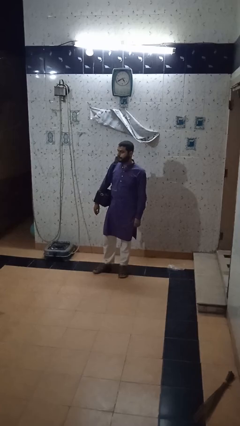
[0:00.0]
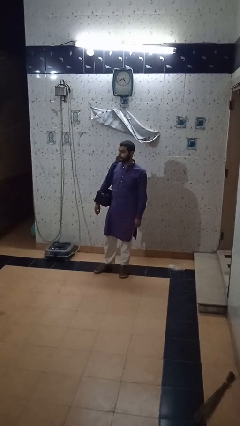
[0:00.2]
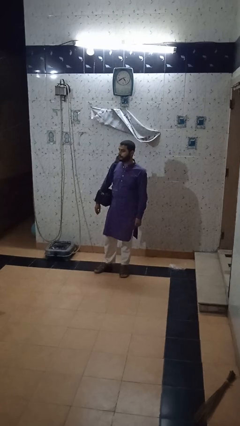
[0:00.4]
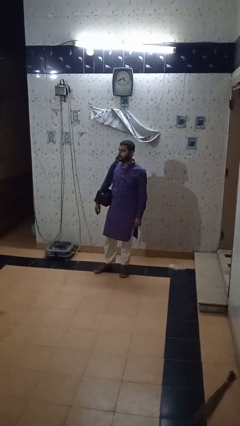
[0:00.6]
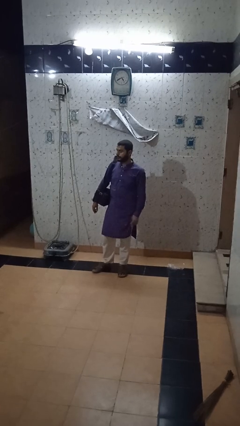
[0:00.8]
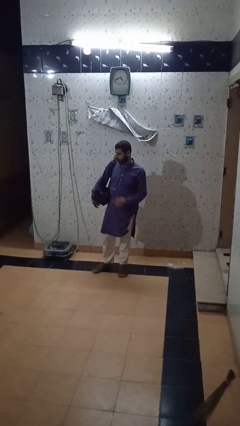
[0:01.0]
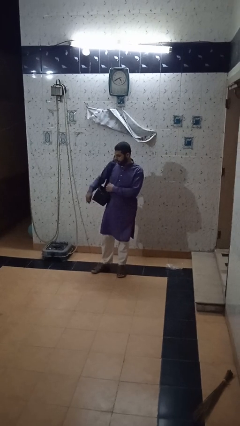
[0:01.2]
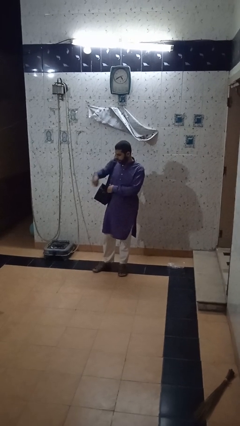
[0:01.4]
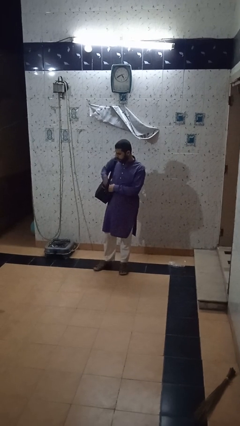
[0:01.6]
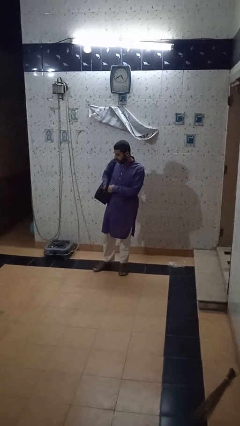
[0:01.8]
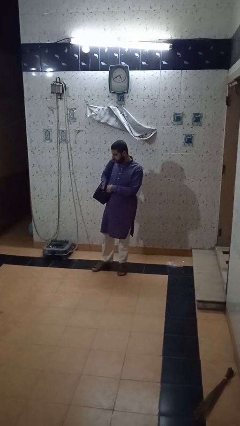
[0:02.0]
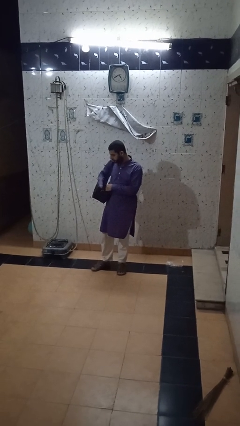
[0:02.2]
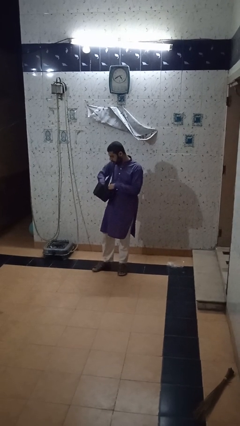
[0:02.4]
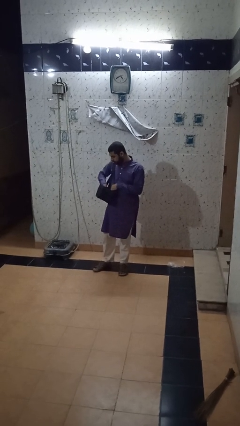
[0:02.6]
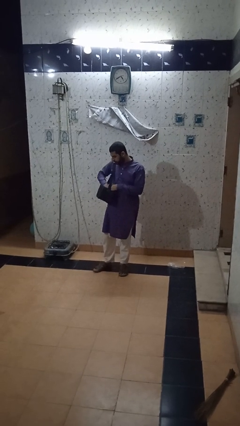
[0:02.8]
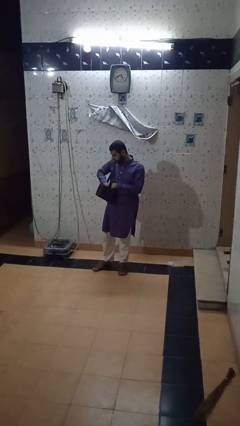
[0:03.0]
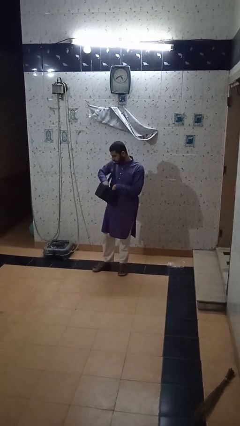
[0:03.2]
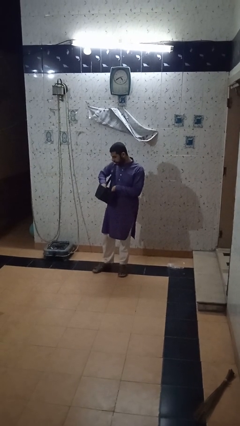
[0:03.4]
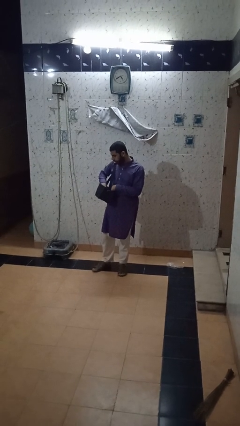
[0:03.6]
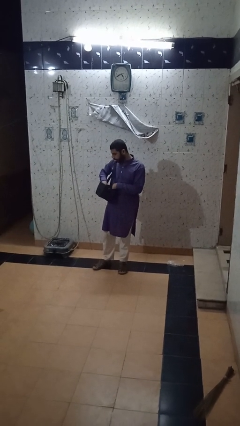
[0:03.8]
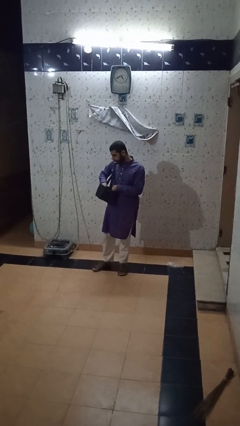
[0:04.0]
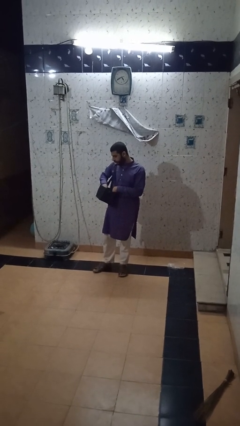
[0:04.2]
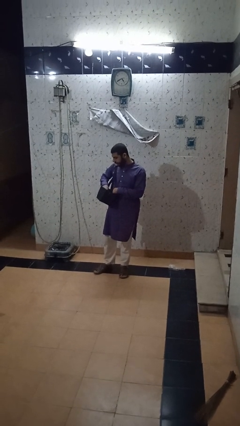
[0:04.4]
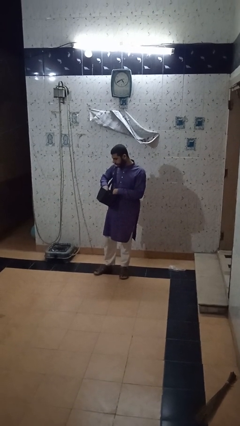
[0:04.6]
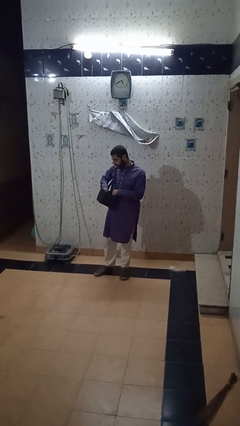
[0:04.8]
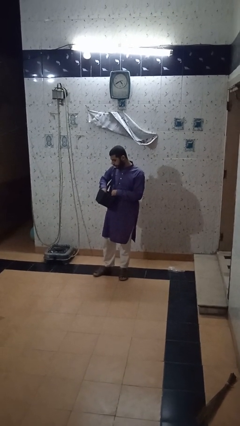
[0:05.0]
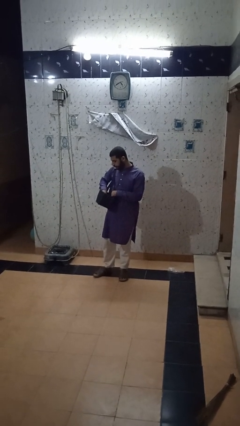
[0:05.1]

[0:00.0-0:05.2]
person searches in backpack

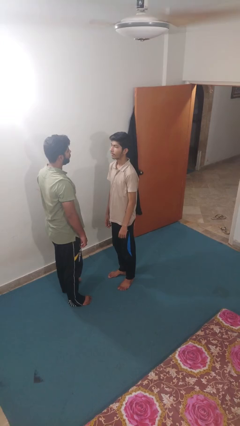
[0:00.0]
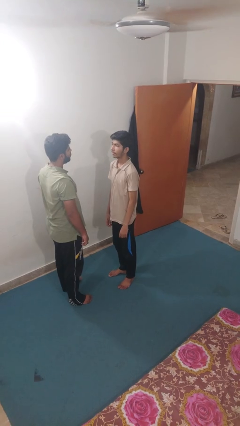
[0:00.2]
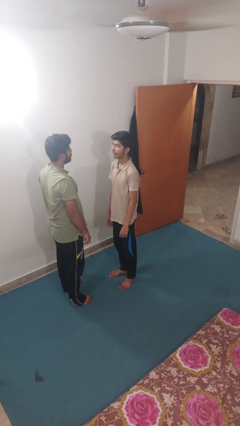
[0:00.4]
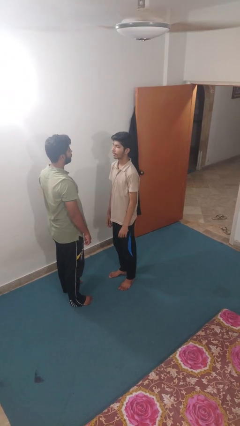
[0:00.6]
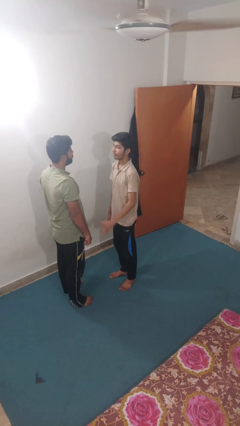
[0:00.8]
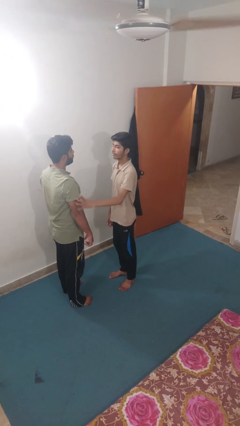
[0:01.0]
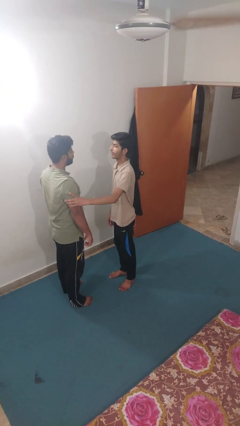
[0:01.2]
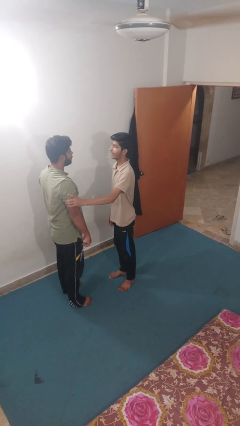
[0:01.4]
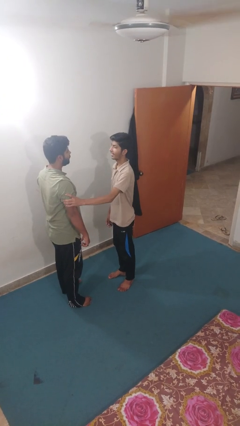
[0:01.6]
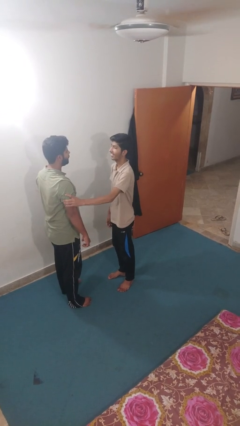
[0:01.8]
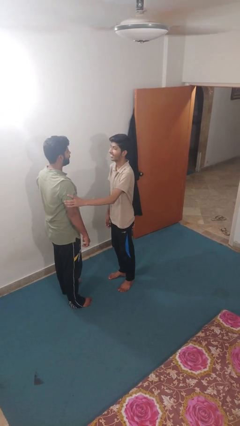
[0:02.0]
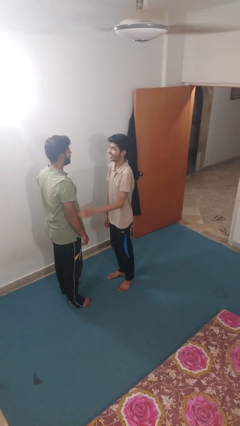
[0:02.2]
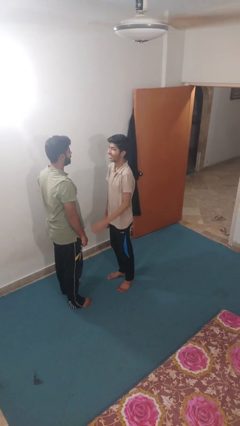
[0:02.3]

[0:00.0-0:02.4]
person grabs person by bicep

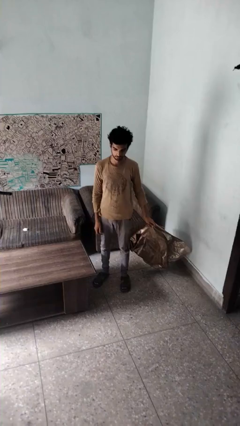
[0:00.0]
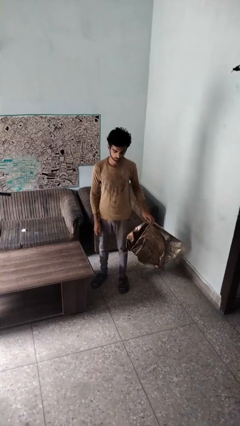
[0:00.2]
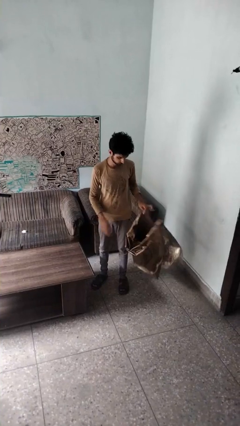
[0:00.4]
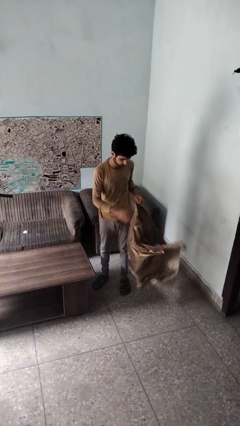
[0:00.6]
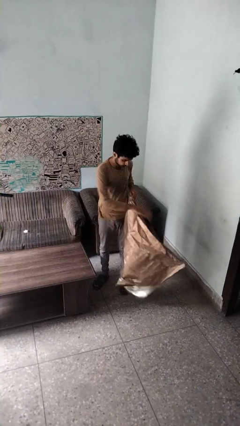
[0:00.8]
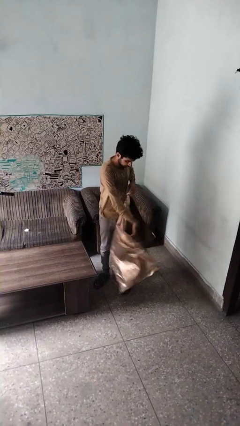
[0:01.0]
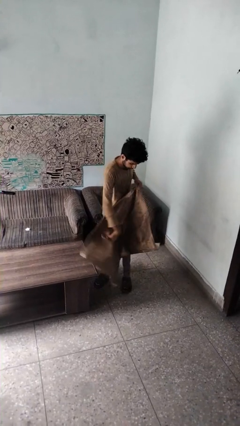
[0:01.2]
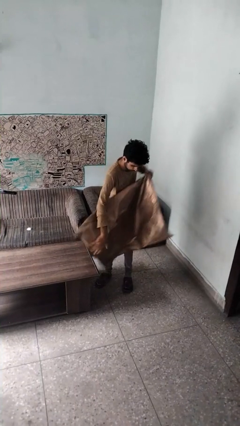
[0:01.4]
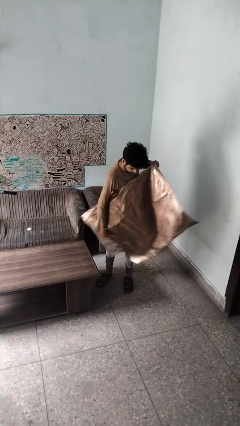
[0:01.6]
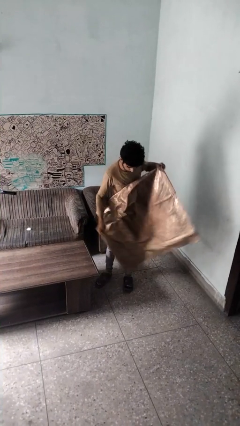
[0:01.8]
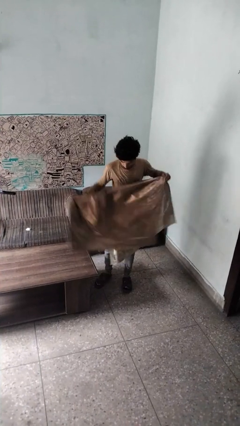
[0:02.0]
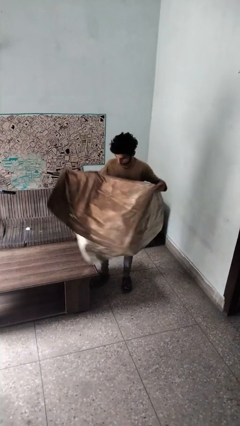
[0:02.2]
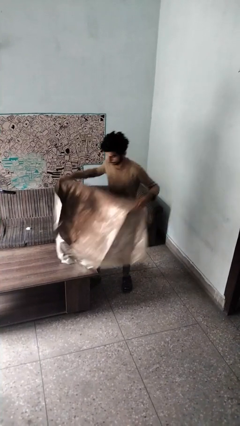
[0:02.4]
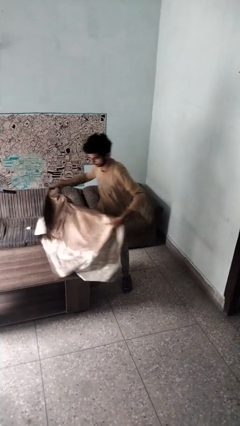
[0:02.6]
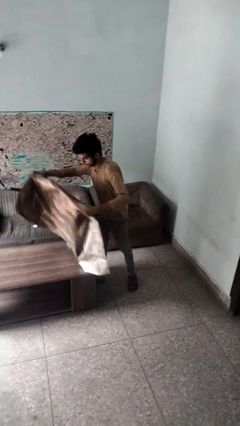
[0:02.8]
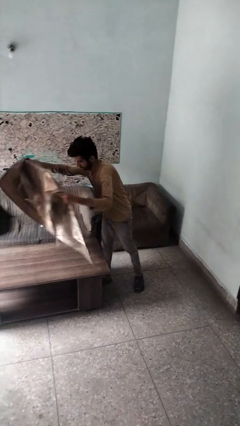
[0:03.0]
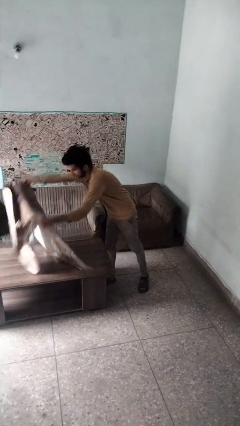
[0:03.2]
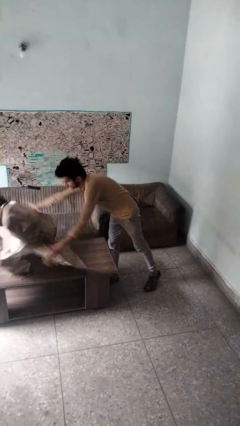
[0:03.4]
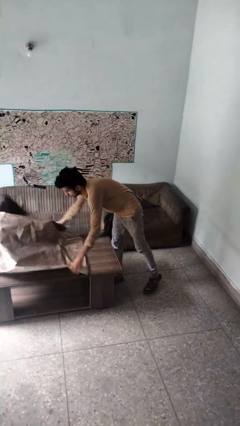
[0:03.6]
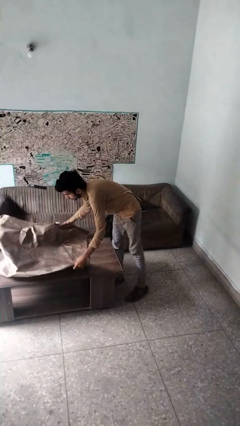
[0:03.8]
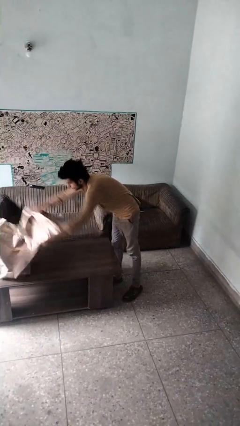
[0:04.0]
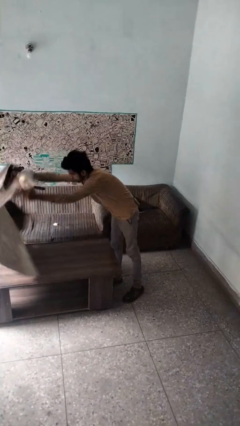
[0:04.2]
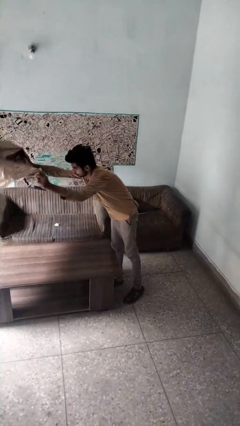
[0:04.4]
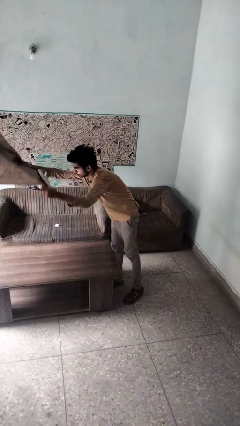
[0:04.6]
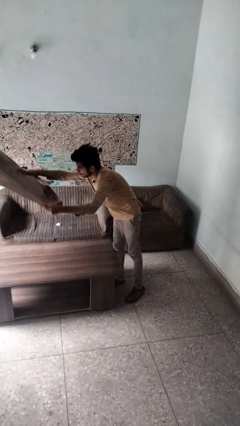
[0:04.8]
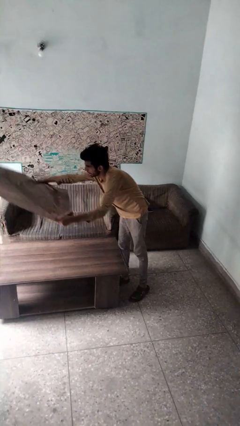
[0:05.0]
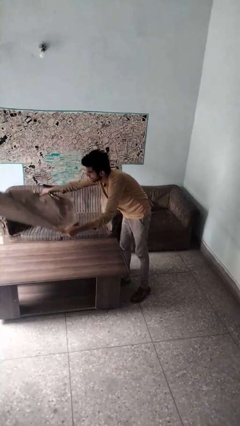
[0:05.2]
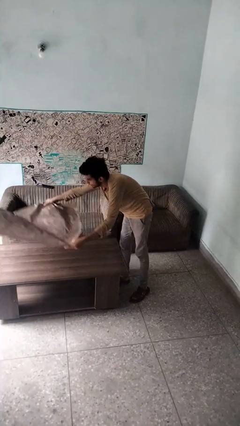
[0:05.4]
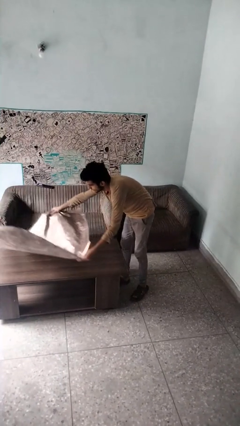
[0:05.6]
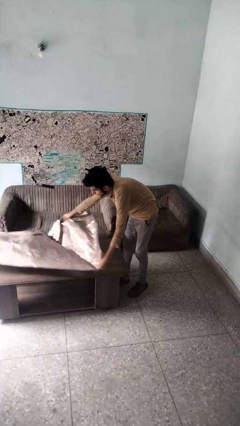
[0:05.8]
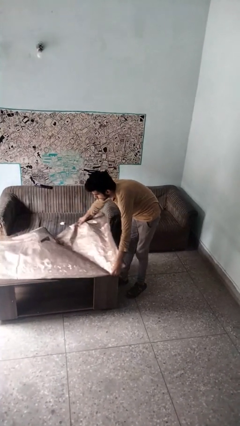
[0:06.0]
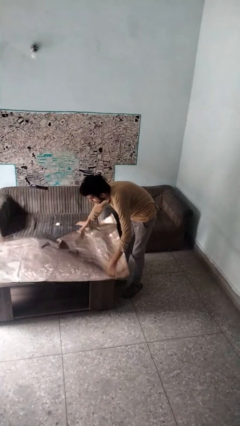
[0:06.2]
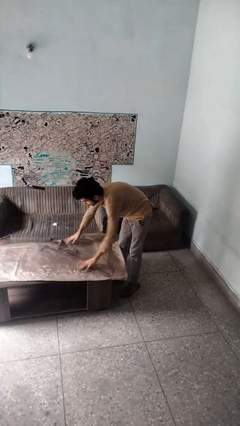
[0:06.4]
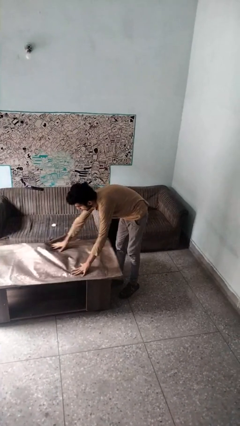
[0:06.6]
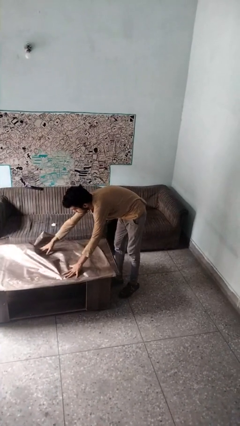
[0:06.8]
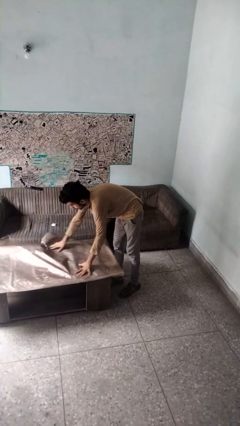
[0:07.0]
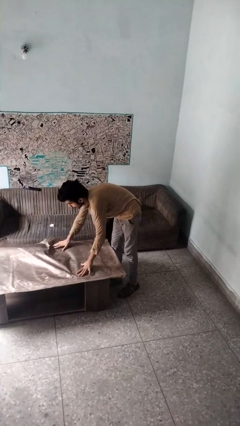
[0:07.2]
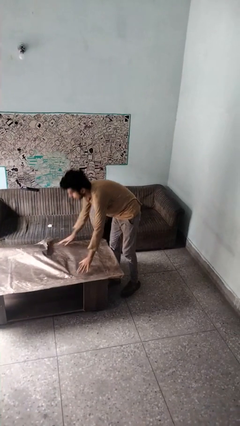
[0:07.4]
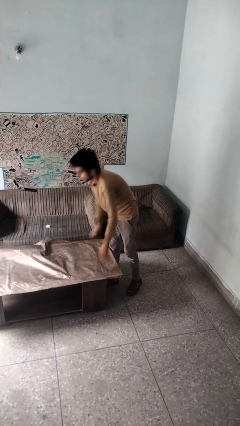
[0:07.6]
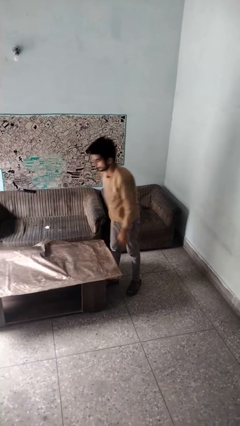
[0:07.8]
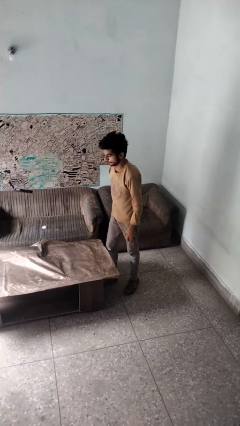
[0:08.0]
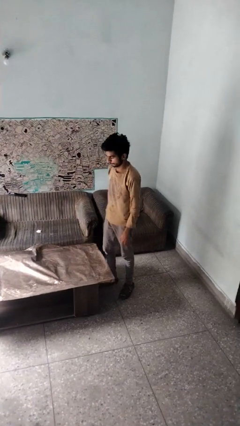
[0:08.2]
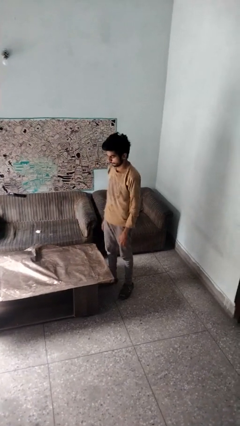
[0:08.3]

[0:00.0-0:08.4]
person spreads tablecloth

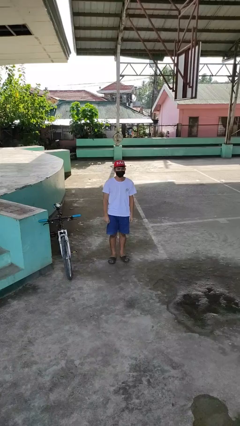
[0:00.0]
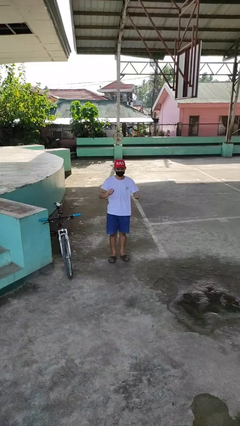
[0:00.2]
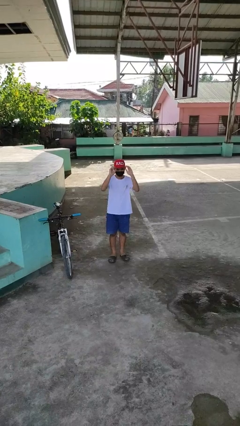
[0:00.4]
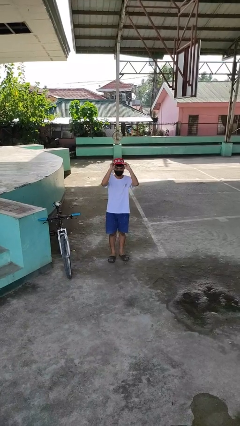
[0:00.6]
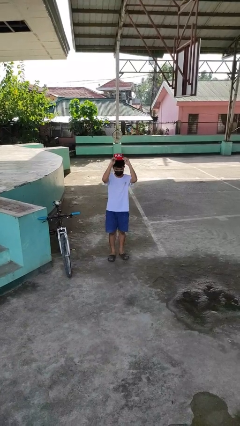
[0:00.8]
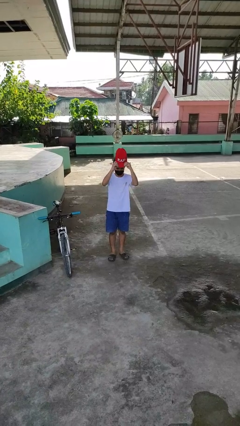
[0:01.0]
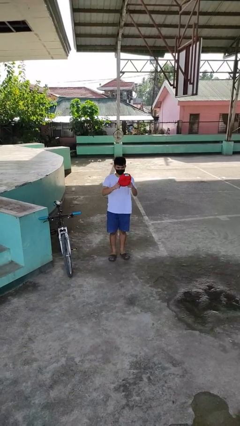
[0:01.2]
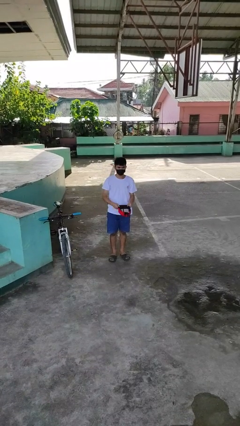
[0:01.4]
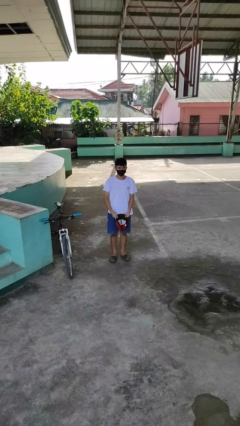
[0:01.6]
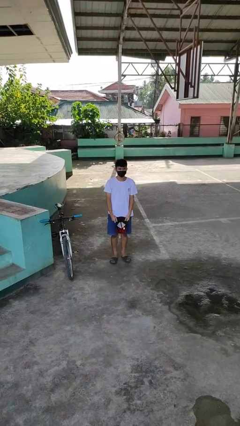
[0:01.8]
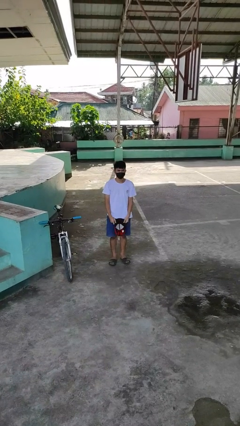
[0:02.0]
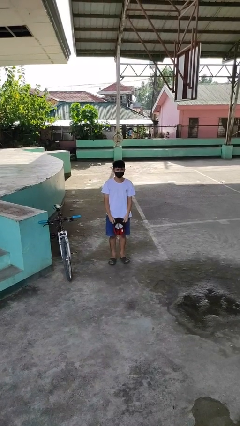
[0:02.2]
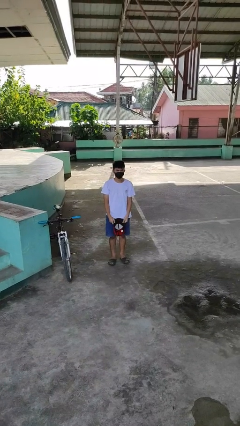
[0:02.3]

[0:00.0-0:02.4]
person takes off hat
